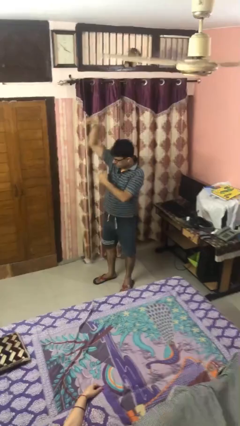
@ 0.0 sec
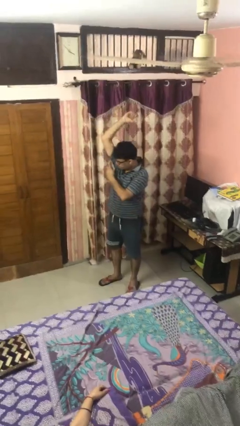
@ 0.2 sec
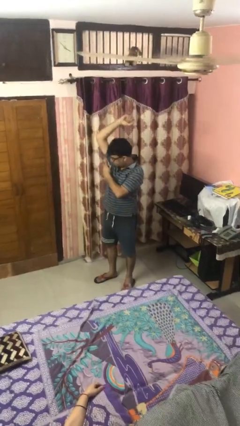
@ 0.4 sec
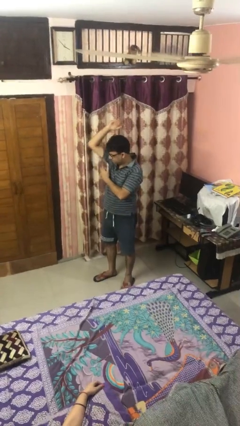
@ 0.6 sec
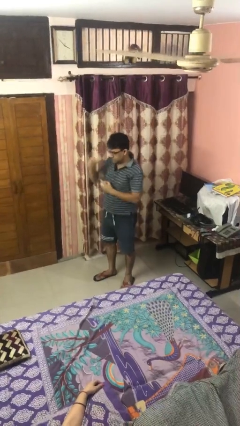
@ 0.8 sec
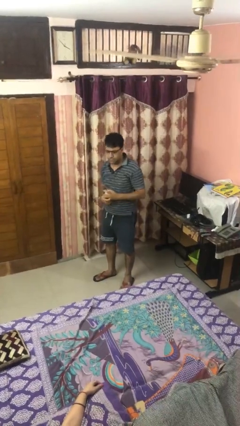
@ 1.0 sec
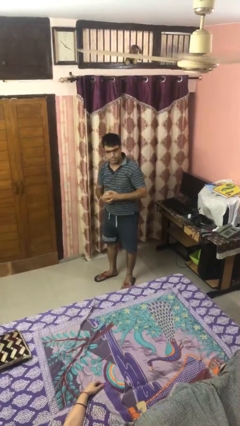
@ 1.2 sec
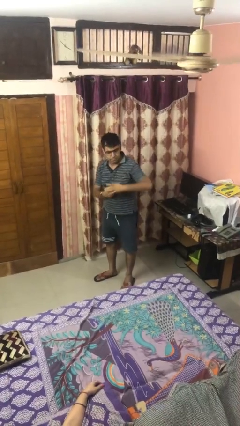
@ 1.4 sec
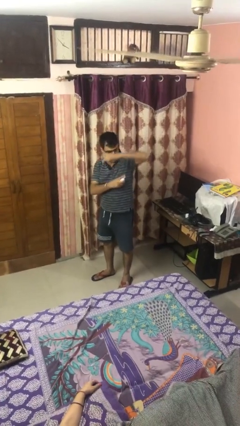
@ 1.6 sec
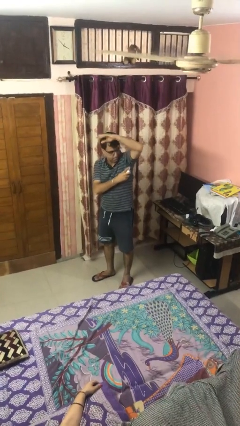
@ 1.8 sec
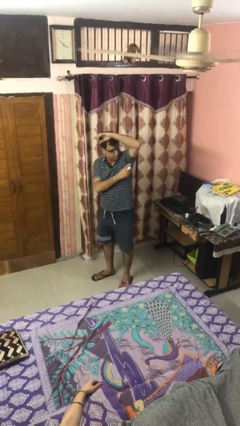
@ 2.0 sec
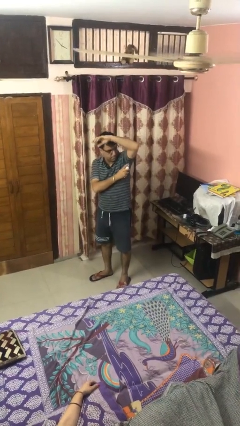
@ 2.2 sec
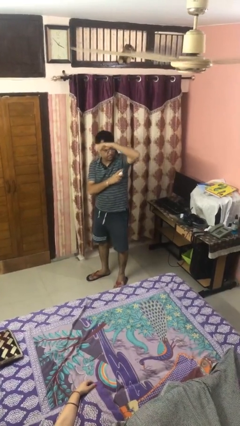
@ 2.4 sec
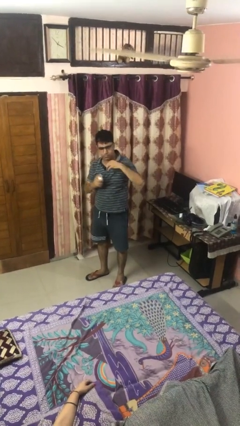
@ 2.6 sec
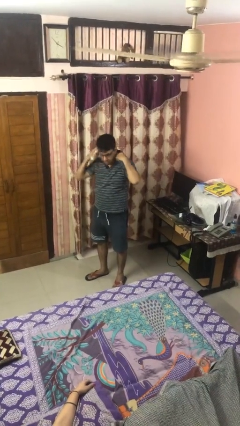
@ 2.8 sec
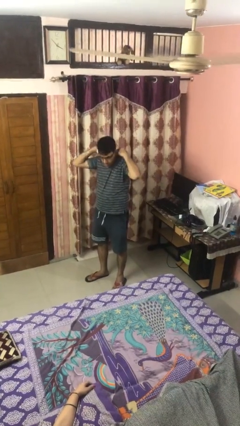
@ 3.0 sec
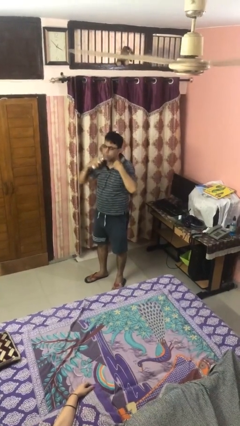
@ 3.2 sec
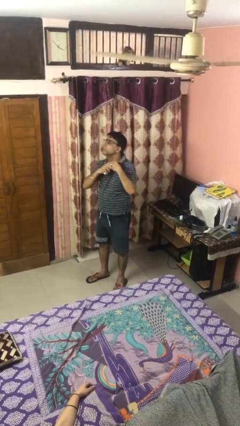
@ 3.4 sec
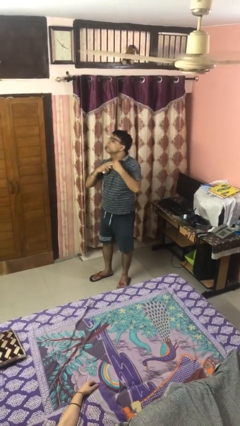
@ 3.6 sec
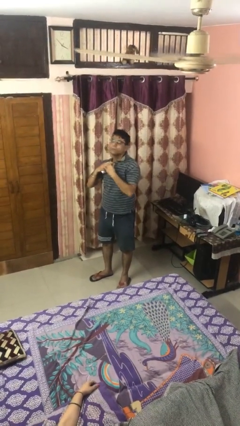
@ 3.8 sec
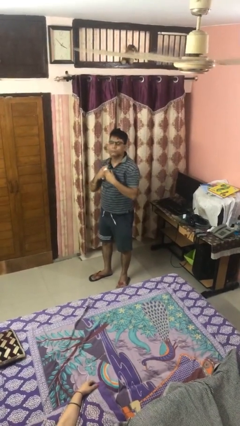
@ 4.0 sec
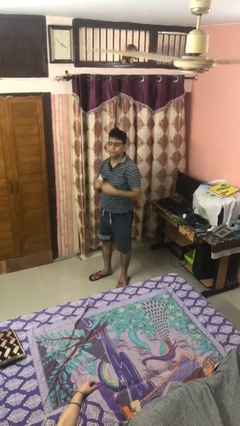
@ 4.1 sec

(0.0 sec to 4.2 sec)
person applies deodorant

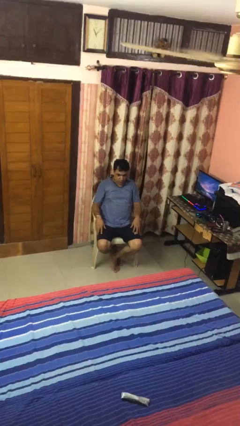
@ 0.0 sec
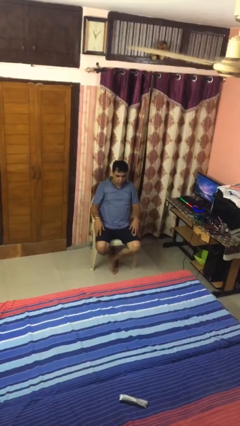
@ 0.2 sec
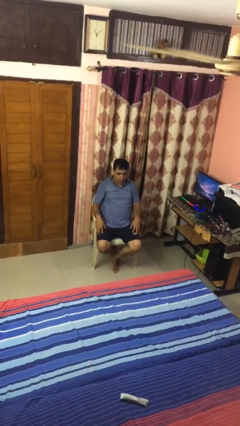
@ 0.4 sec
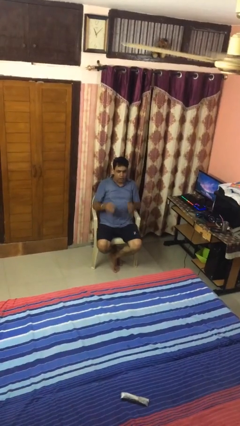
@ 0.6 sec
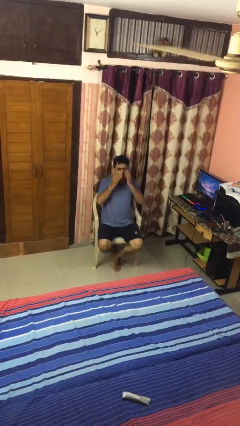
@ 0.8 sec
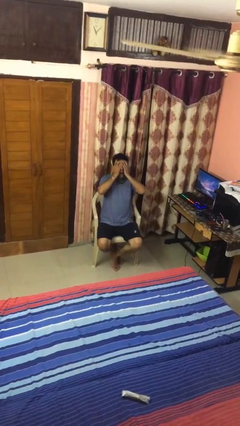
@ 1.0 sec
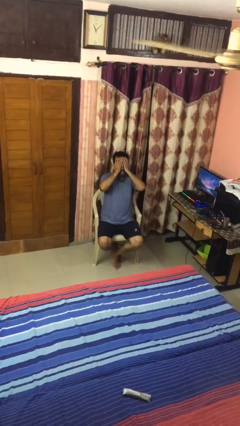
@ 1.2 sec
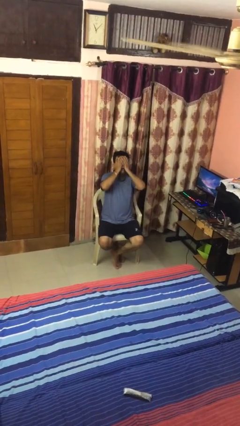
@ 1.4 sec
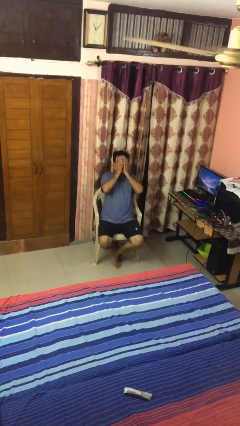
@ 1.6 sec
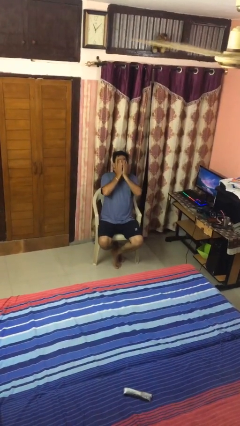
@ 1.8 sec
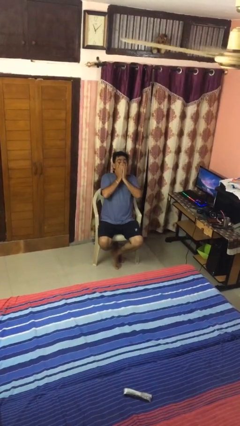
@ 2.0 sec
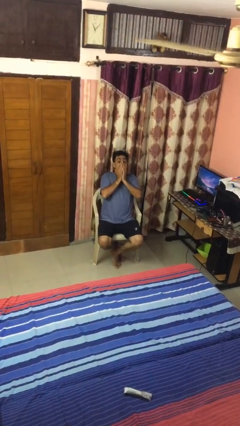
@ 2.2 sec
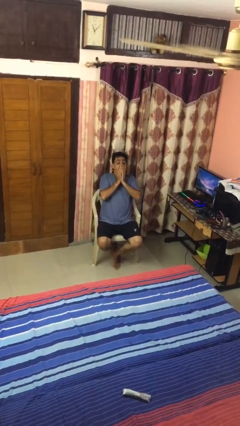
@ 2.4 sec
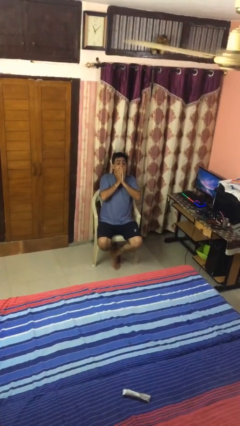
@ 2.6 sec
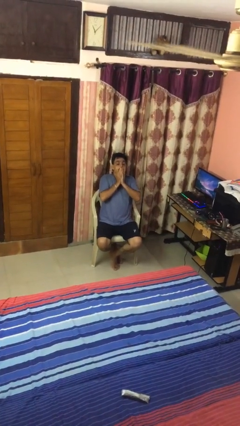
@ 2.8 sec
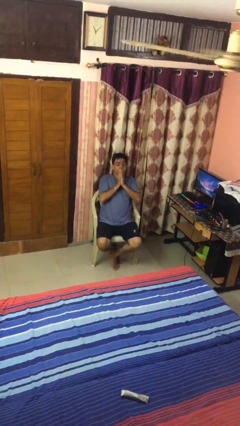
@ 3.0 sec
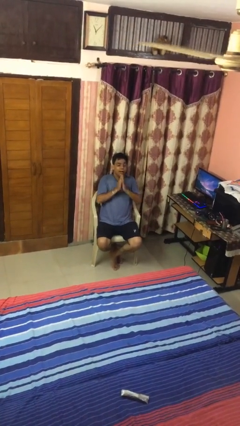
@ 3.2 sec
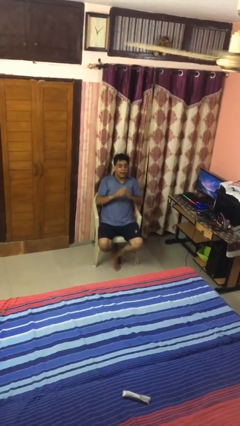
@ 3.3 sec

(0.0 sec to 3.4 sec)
person covers face with hands

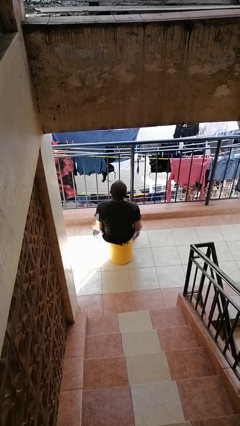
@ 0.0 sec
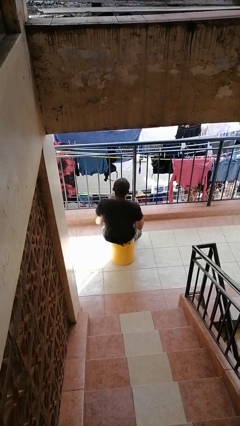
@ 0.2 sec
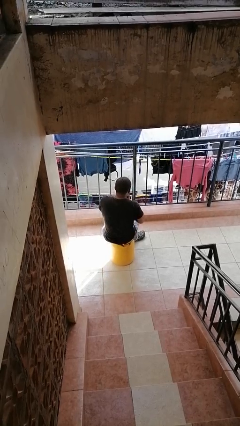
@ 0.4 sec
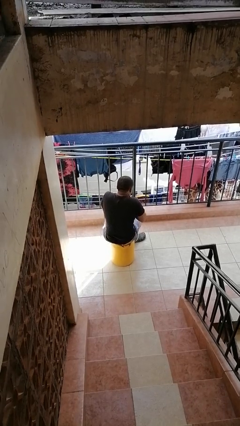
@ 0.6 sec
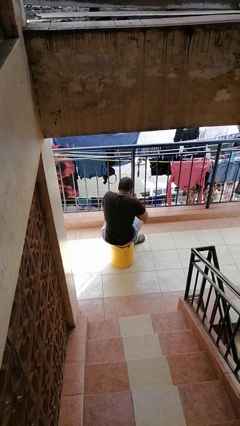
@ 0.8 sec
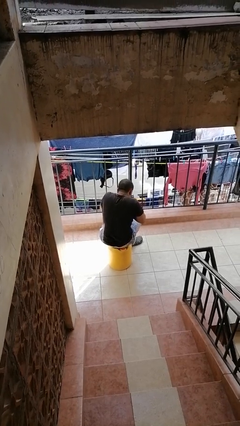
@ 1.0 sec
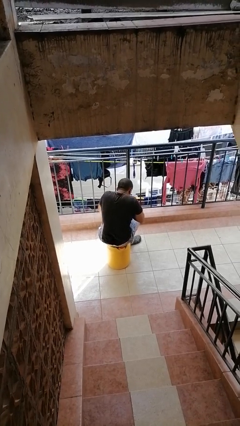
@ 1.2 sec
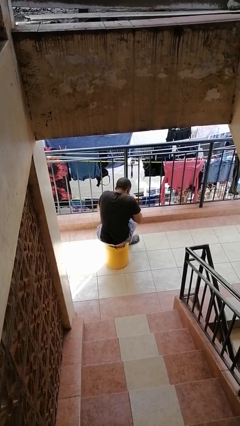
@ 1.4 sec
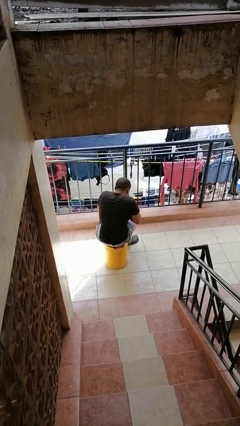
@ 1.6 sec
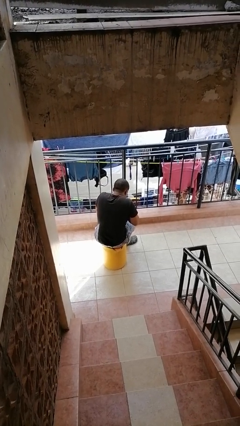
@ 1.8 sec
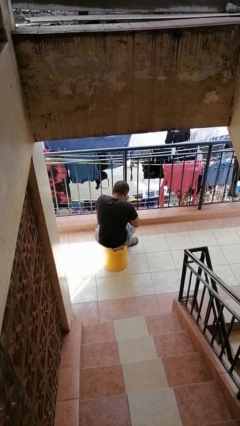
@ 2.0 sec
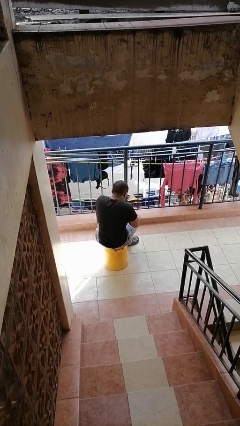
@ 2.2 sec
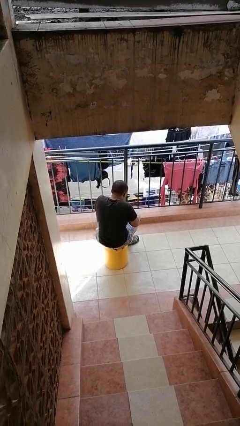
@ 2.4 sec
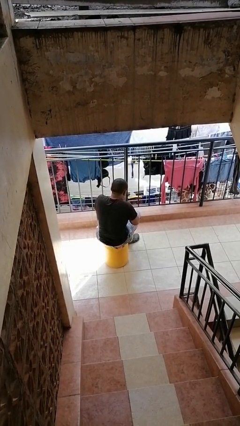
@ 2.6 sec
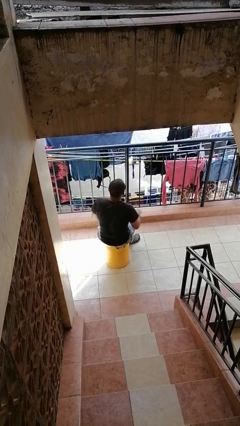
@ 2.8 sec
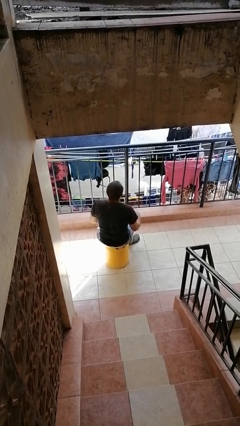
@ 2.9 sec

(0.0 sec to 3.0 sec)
person blows into hands

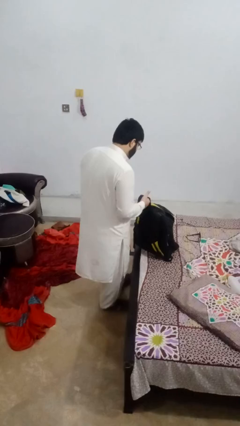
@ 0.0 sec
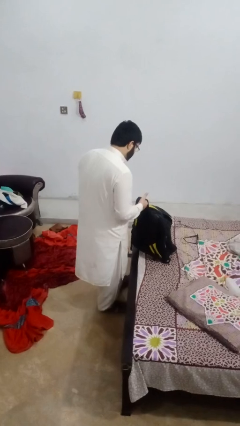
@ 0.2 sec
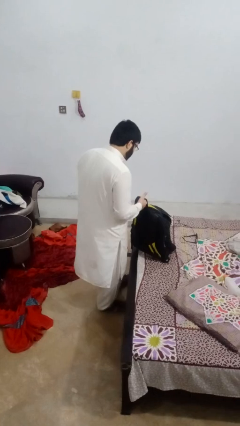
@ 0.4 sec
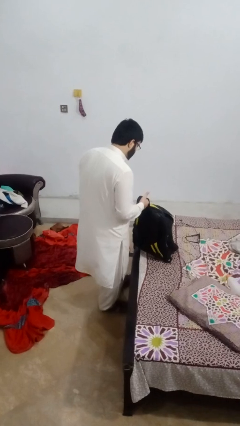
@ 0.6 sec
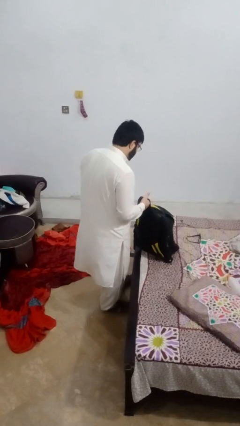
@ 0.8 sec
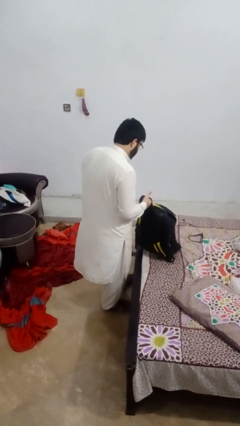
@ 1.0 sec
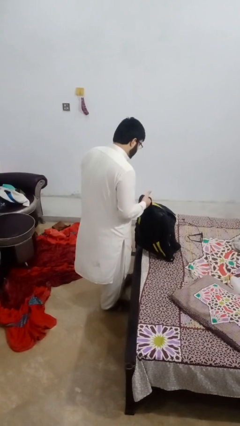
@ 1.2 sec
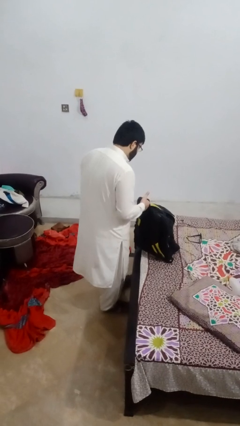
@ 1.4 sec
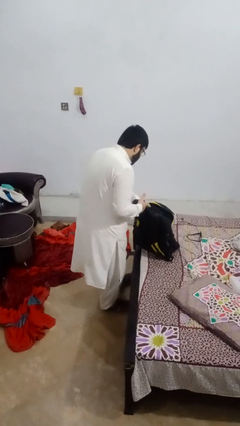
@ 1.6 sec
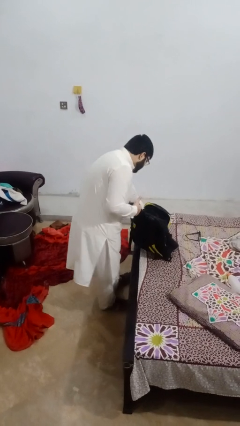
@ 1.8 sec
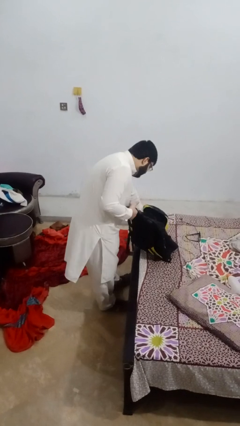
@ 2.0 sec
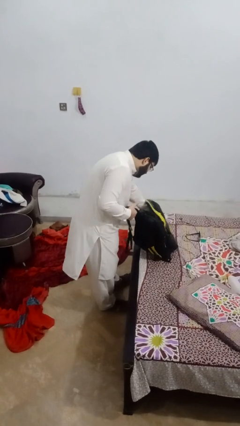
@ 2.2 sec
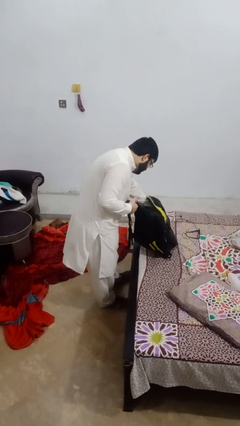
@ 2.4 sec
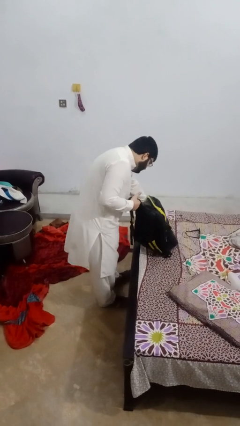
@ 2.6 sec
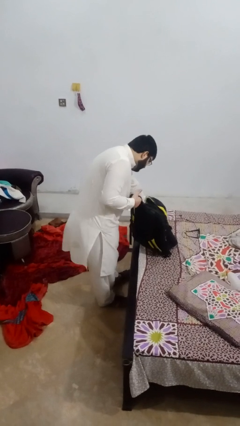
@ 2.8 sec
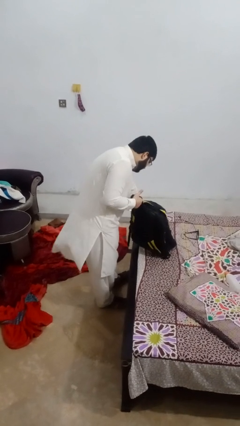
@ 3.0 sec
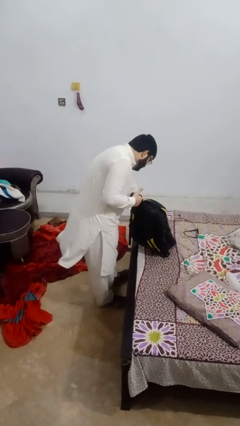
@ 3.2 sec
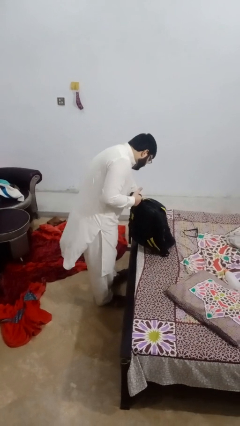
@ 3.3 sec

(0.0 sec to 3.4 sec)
person searches in backpack

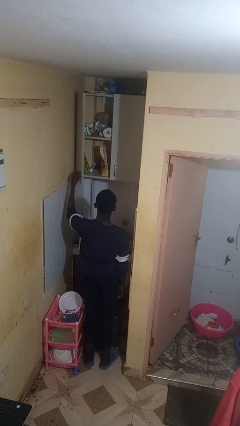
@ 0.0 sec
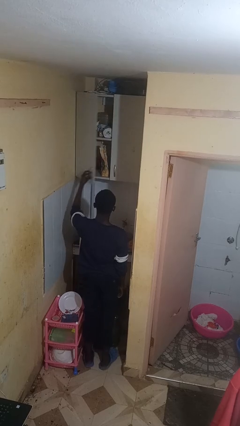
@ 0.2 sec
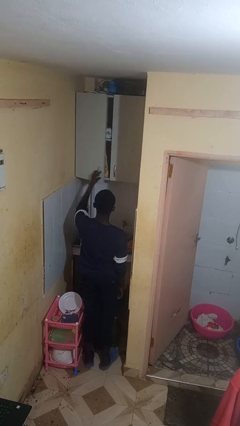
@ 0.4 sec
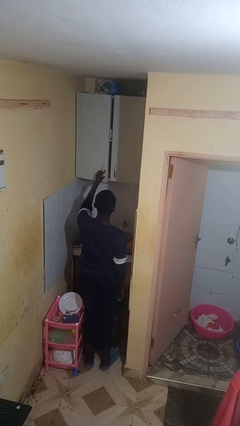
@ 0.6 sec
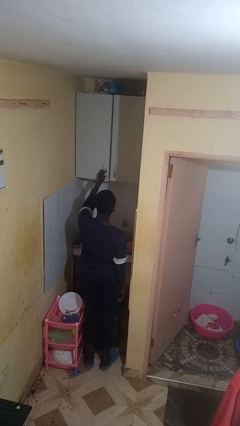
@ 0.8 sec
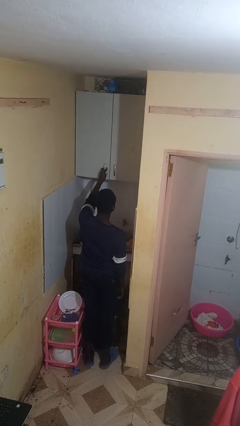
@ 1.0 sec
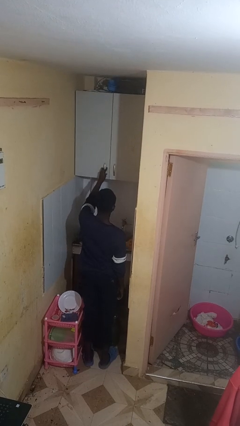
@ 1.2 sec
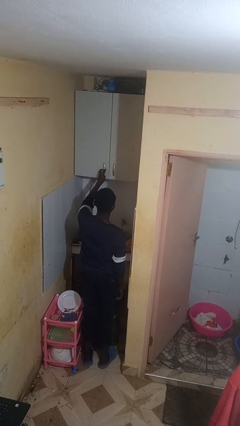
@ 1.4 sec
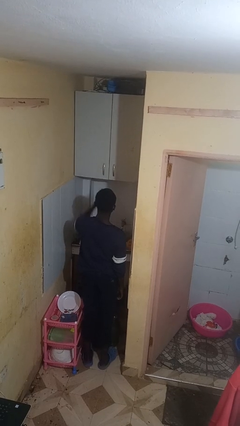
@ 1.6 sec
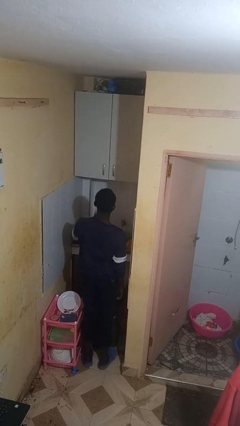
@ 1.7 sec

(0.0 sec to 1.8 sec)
person closes cabinet

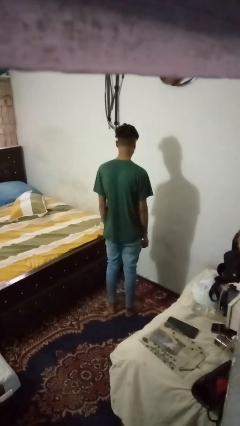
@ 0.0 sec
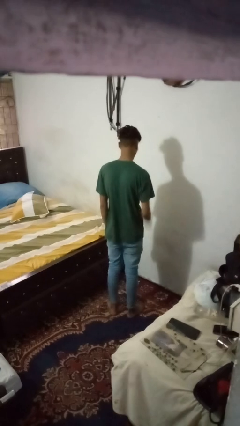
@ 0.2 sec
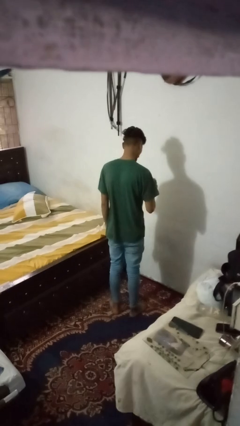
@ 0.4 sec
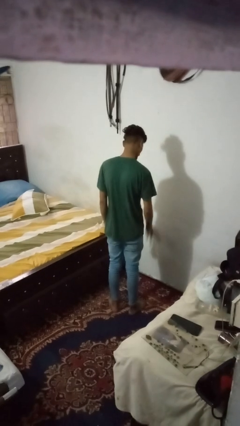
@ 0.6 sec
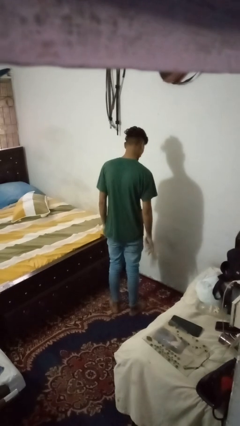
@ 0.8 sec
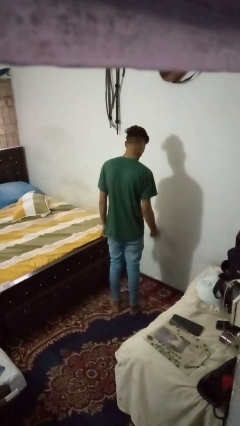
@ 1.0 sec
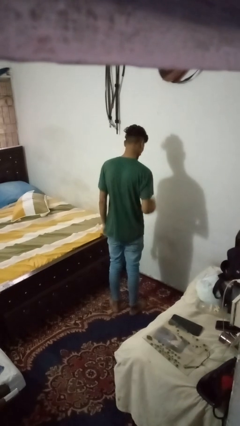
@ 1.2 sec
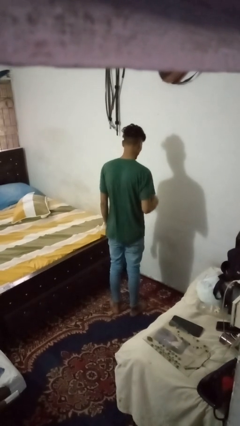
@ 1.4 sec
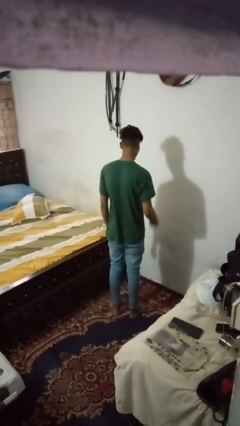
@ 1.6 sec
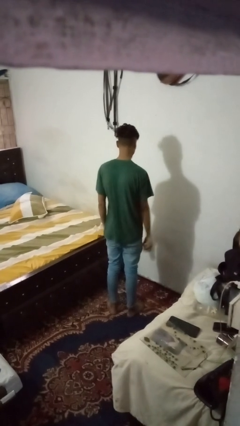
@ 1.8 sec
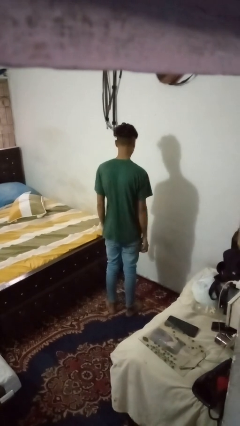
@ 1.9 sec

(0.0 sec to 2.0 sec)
person bounces ball on floor
